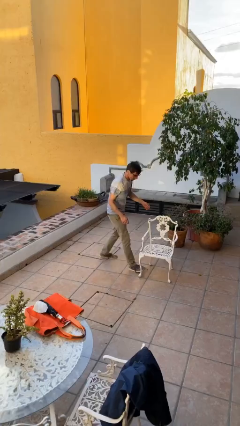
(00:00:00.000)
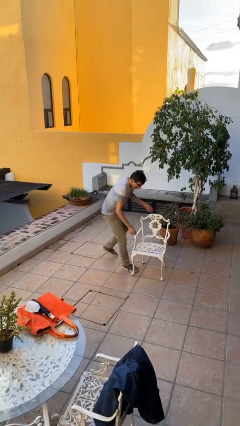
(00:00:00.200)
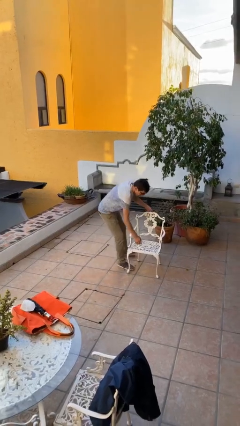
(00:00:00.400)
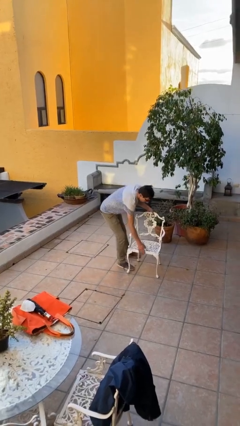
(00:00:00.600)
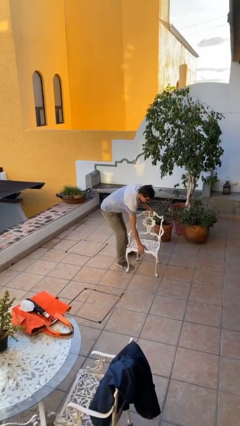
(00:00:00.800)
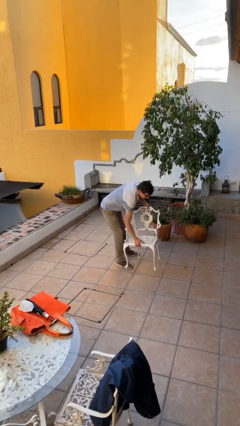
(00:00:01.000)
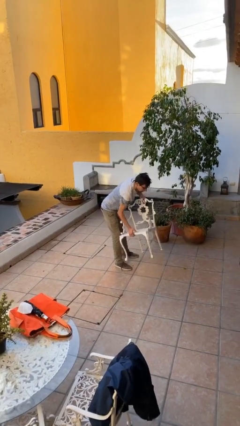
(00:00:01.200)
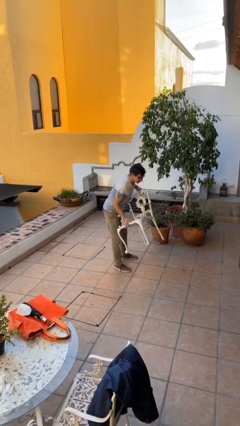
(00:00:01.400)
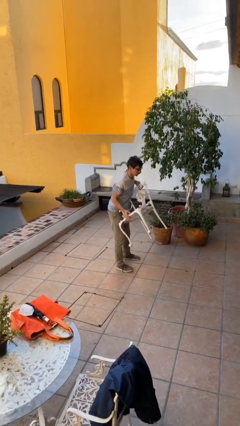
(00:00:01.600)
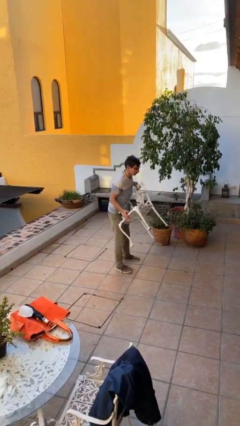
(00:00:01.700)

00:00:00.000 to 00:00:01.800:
person picks up object from floor

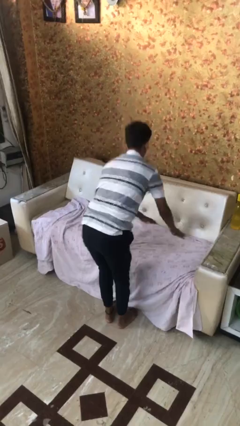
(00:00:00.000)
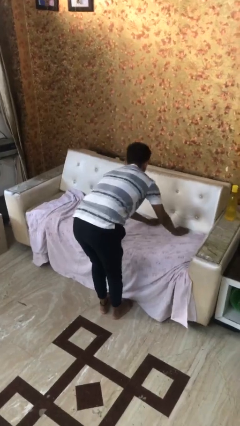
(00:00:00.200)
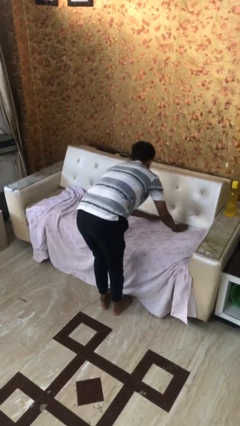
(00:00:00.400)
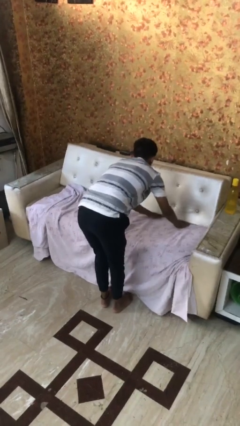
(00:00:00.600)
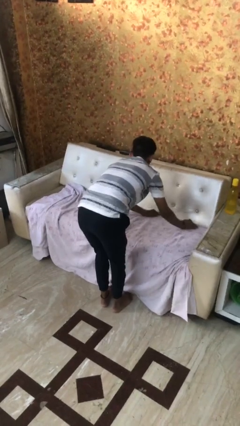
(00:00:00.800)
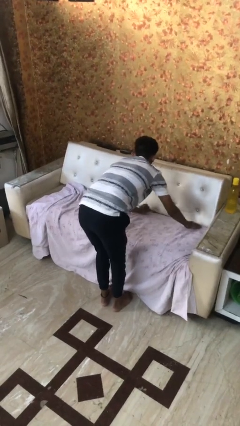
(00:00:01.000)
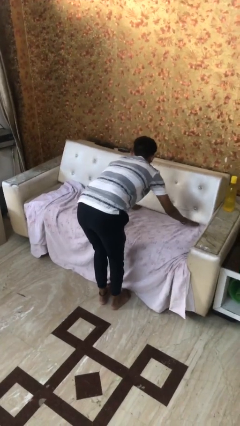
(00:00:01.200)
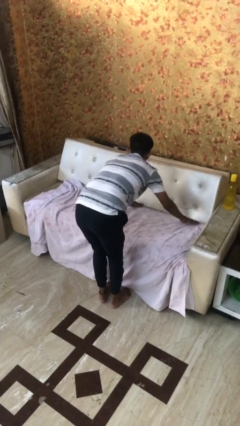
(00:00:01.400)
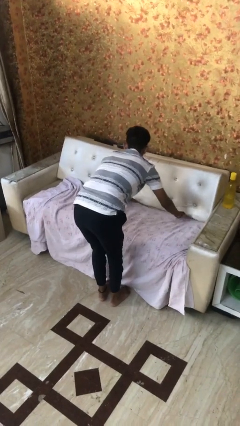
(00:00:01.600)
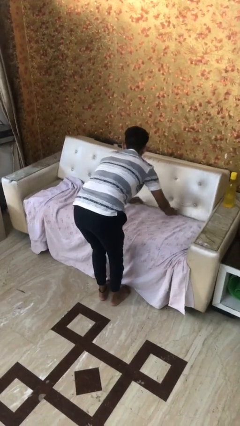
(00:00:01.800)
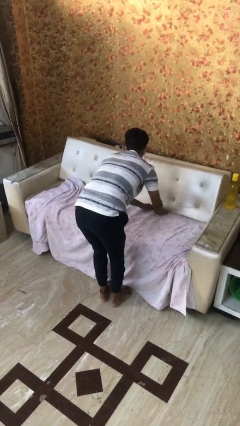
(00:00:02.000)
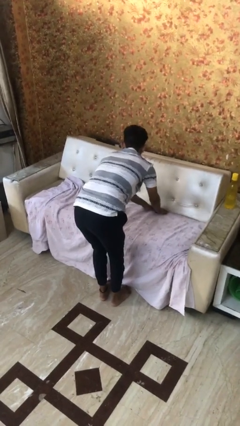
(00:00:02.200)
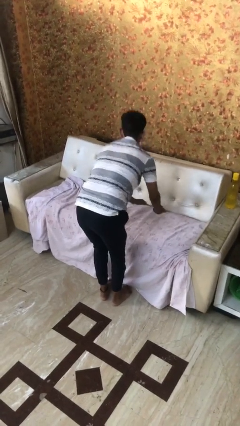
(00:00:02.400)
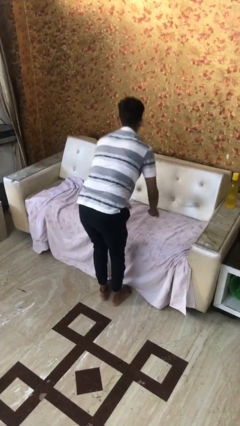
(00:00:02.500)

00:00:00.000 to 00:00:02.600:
person makes bed

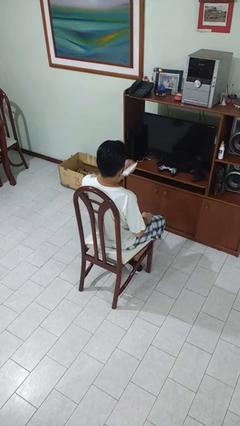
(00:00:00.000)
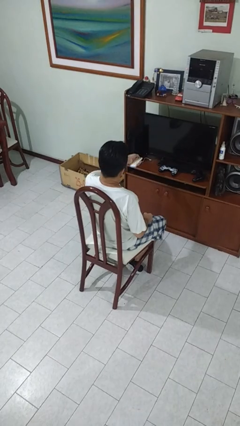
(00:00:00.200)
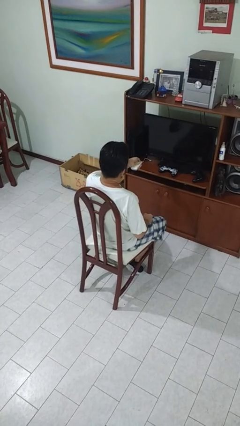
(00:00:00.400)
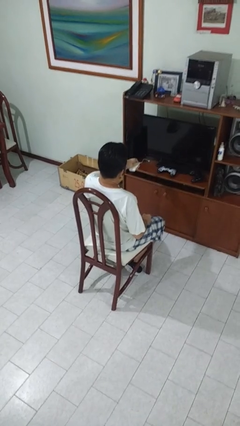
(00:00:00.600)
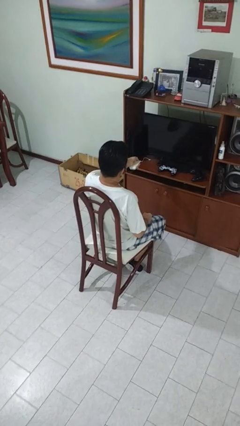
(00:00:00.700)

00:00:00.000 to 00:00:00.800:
person uses television remote

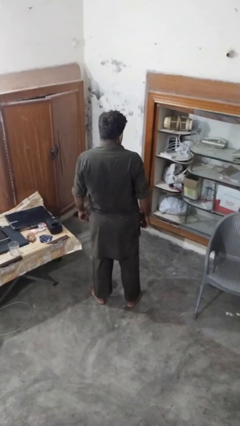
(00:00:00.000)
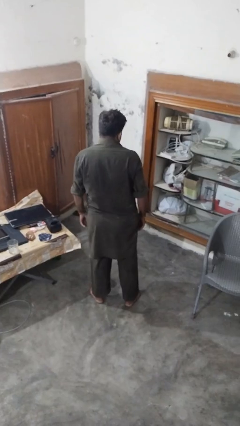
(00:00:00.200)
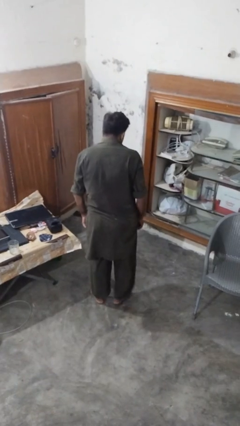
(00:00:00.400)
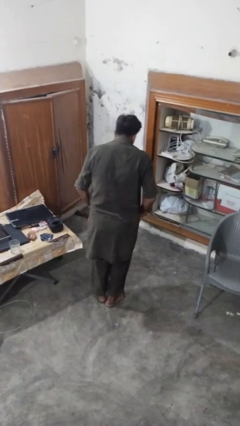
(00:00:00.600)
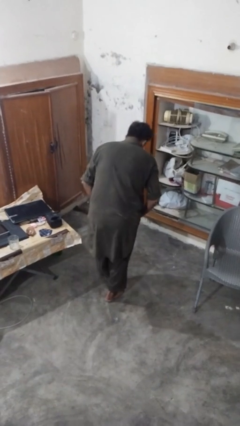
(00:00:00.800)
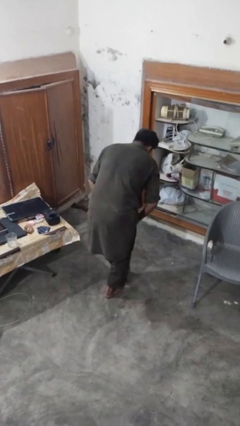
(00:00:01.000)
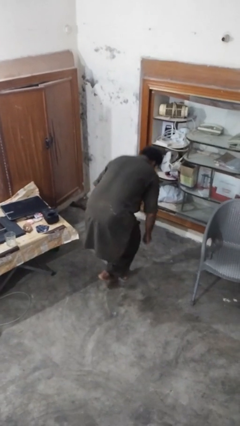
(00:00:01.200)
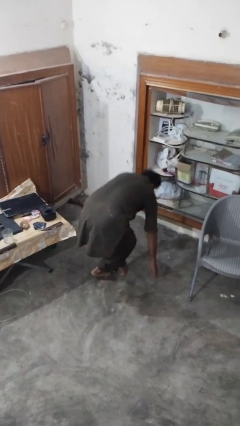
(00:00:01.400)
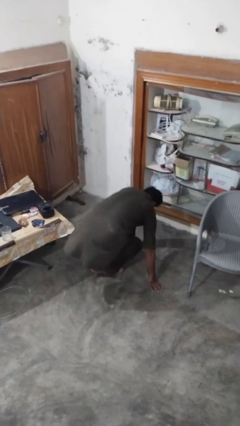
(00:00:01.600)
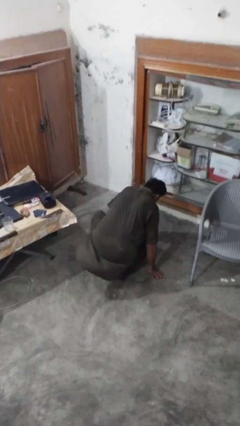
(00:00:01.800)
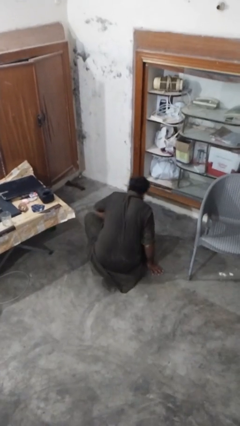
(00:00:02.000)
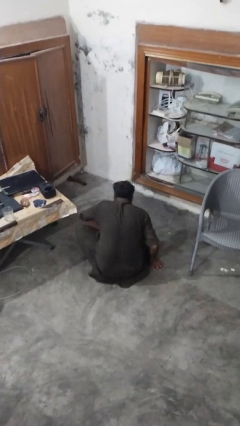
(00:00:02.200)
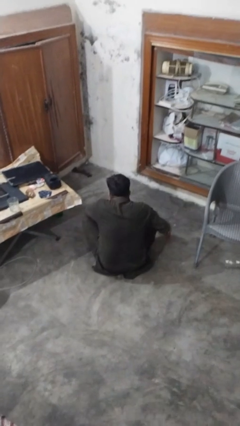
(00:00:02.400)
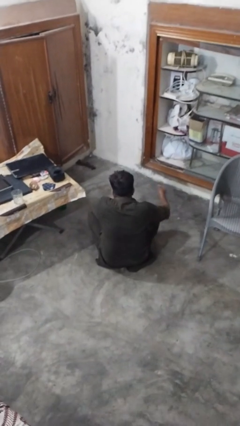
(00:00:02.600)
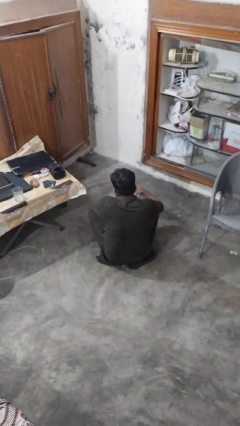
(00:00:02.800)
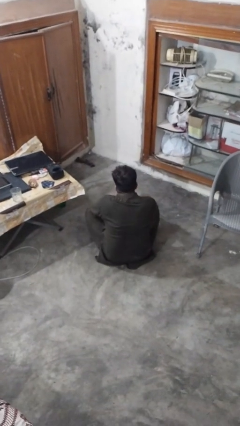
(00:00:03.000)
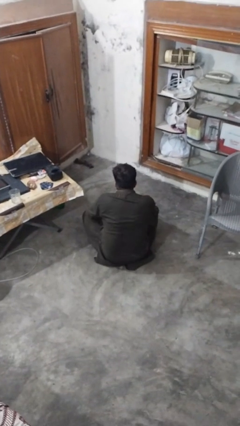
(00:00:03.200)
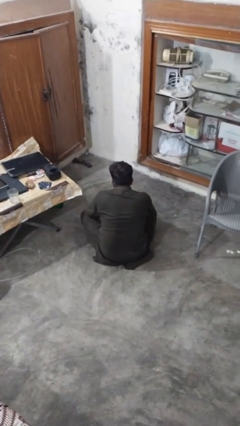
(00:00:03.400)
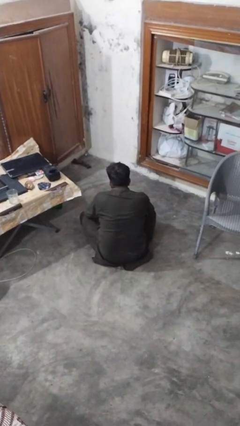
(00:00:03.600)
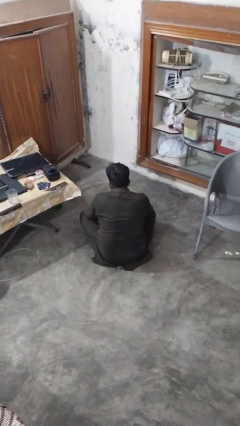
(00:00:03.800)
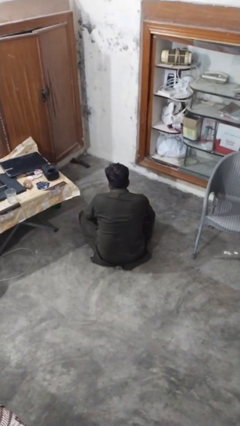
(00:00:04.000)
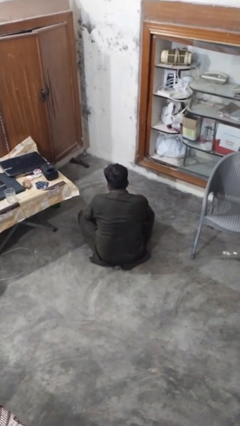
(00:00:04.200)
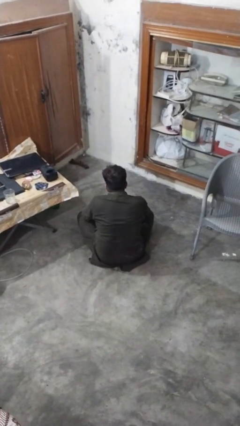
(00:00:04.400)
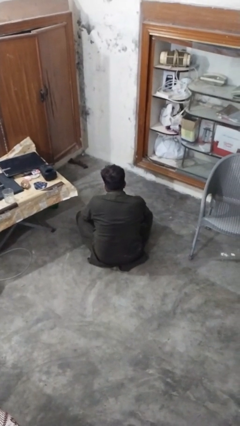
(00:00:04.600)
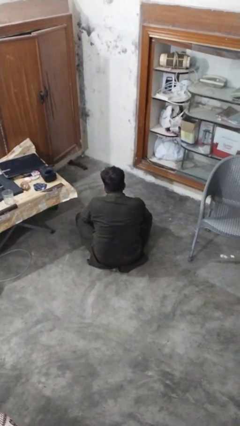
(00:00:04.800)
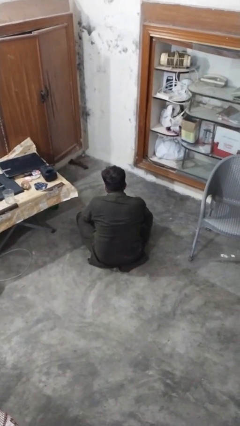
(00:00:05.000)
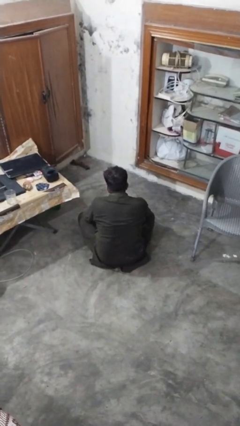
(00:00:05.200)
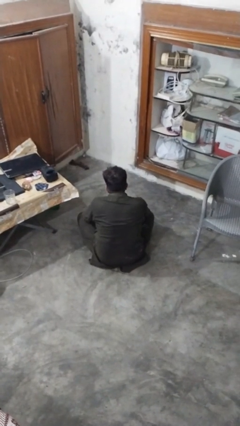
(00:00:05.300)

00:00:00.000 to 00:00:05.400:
person sits crisscross

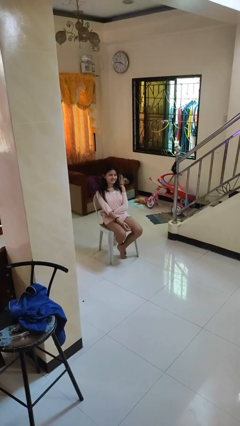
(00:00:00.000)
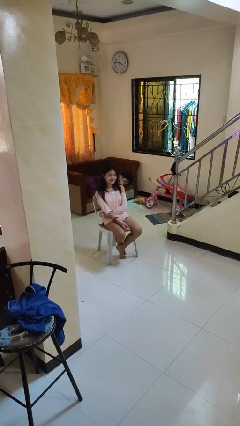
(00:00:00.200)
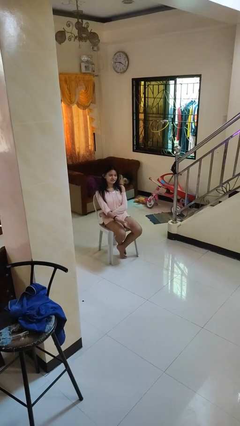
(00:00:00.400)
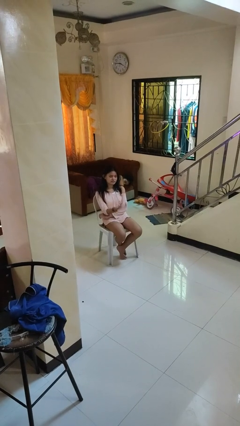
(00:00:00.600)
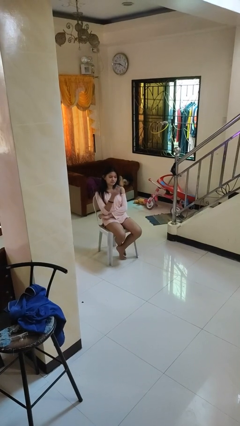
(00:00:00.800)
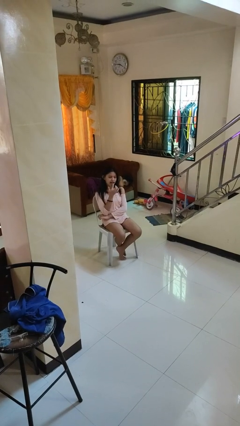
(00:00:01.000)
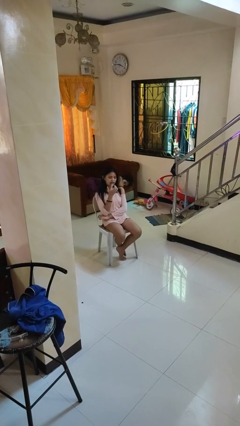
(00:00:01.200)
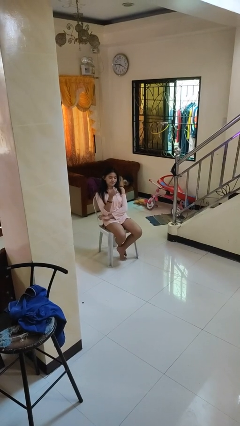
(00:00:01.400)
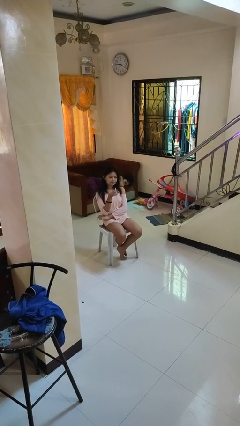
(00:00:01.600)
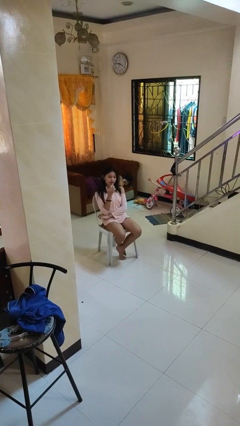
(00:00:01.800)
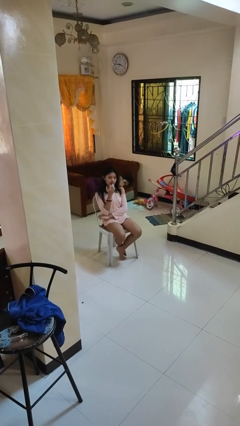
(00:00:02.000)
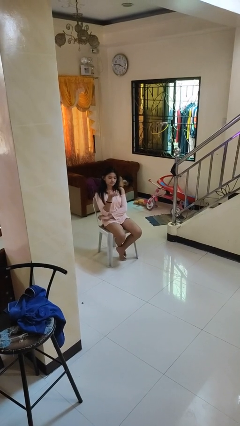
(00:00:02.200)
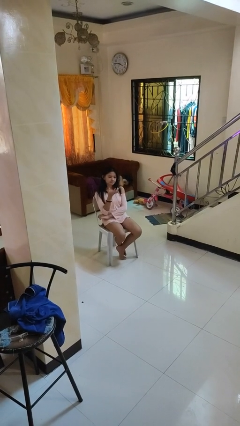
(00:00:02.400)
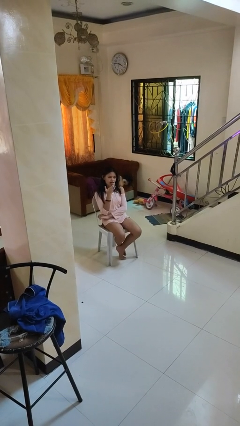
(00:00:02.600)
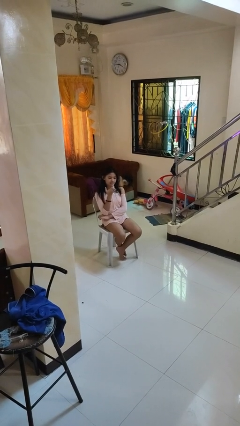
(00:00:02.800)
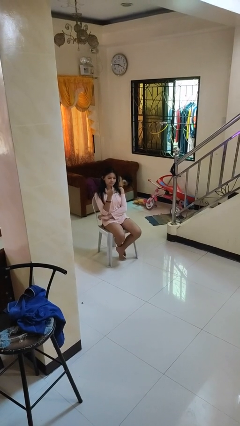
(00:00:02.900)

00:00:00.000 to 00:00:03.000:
person licks fingers

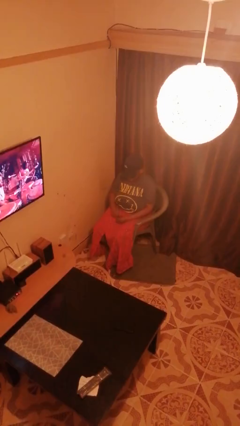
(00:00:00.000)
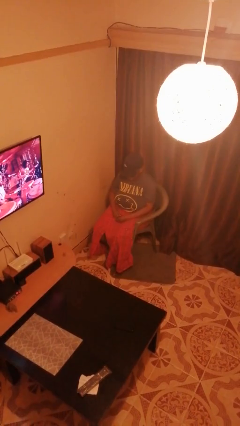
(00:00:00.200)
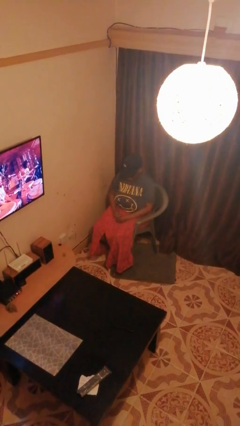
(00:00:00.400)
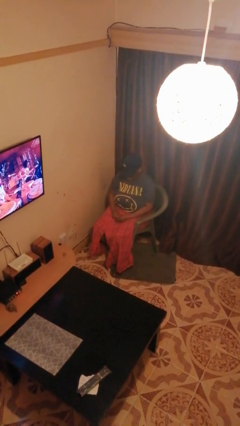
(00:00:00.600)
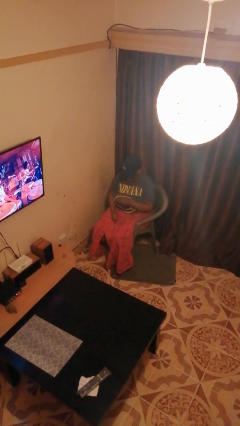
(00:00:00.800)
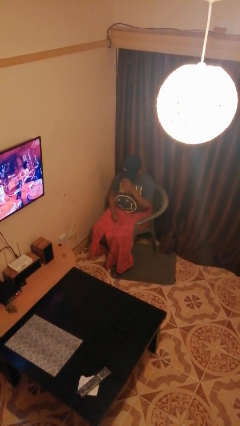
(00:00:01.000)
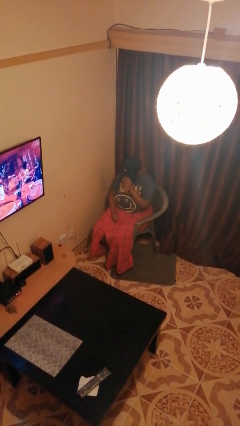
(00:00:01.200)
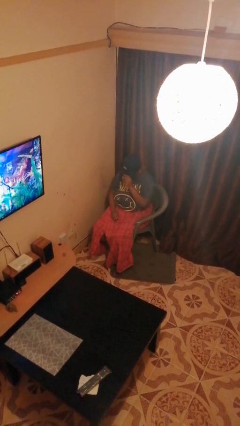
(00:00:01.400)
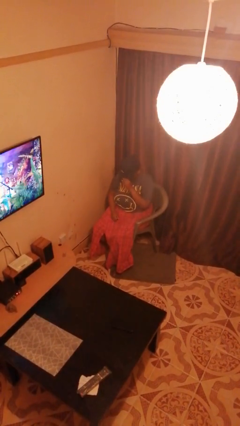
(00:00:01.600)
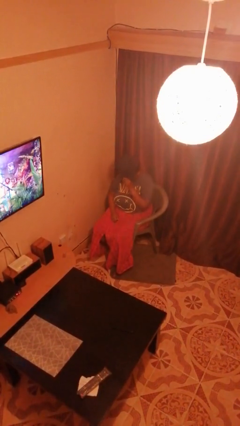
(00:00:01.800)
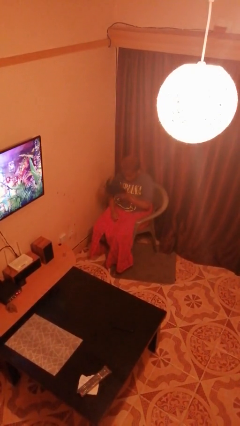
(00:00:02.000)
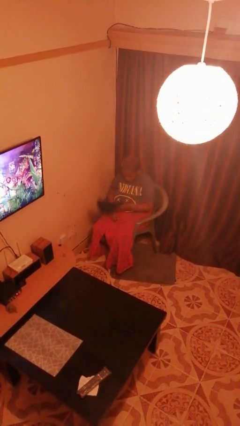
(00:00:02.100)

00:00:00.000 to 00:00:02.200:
person takes off hat

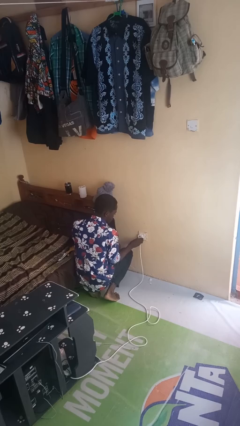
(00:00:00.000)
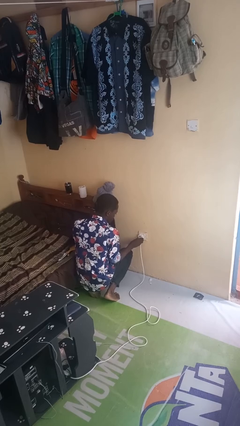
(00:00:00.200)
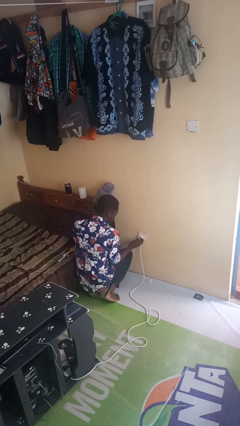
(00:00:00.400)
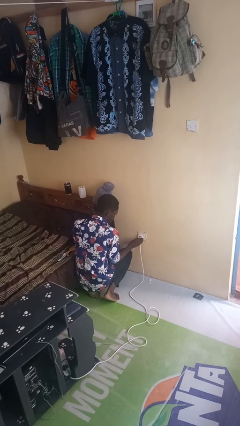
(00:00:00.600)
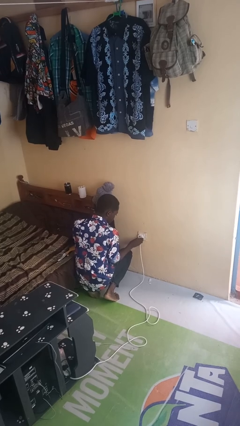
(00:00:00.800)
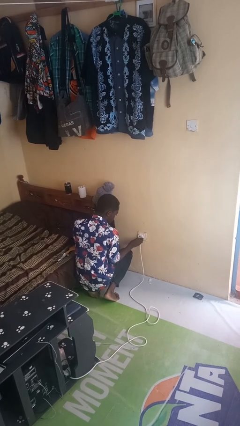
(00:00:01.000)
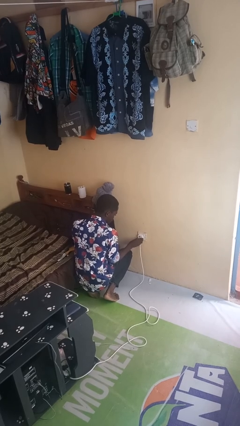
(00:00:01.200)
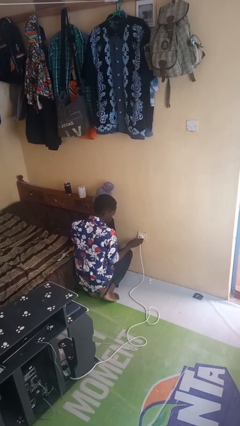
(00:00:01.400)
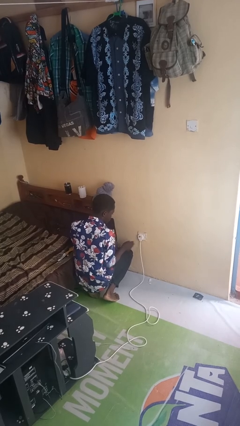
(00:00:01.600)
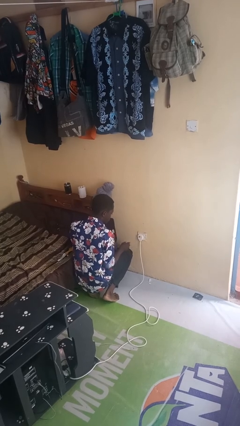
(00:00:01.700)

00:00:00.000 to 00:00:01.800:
person plugs into electrical socket
